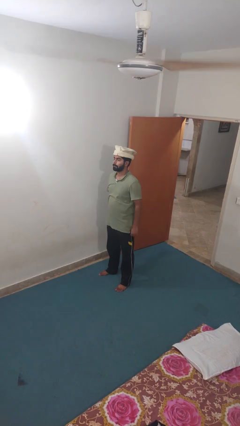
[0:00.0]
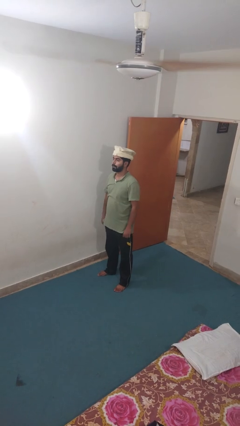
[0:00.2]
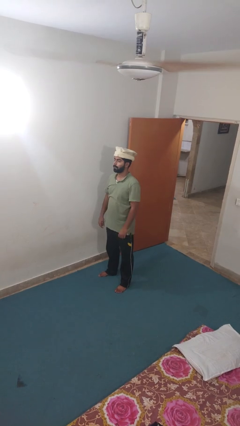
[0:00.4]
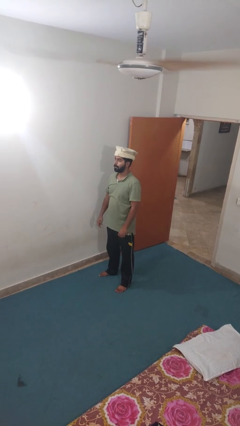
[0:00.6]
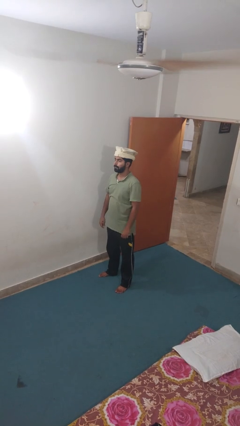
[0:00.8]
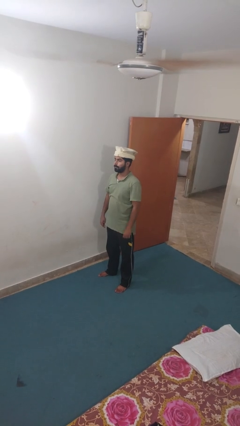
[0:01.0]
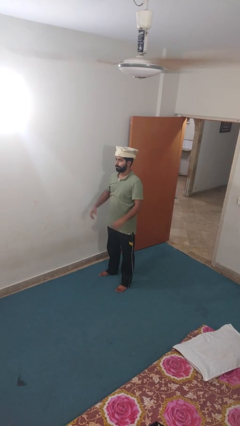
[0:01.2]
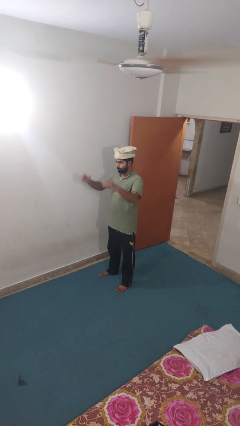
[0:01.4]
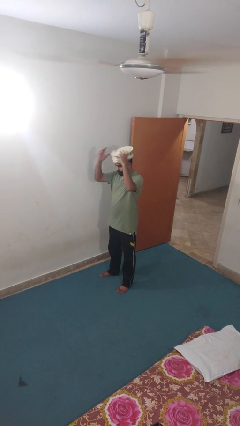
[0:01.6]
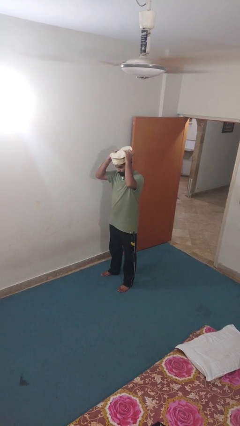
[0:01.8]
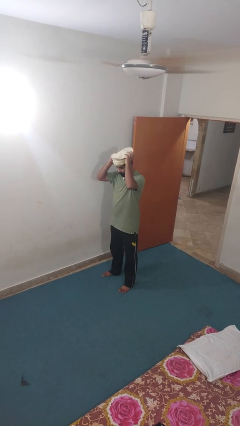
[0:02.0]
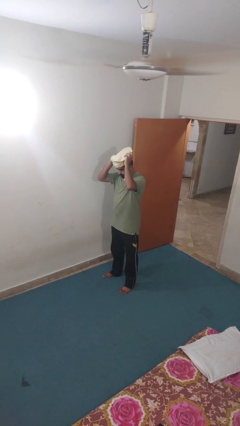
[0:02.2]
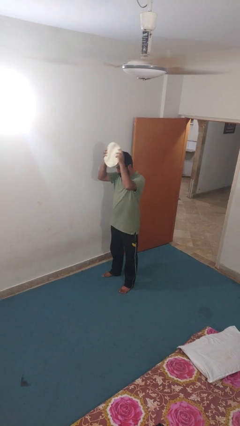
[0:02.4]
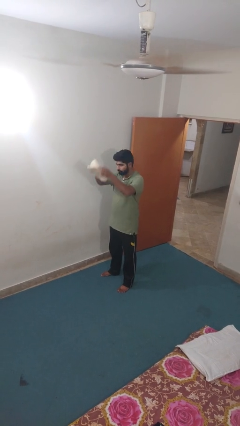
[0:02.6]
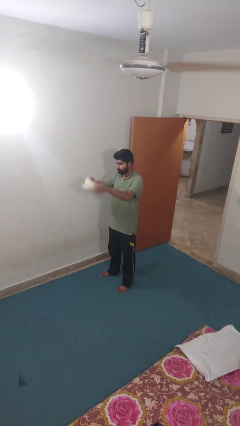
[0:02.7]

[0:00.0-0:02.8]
person takes off hat

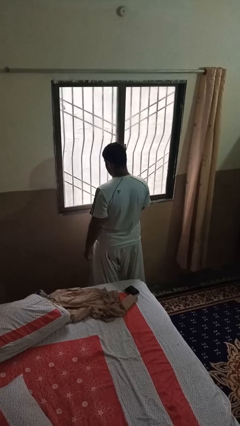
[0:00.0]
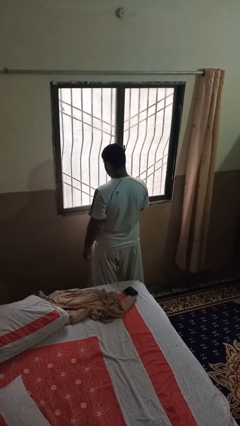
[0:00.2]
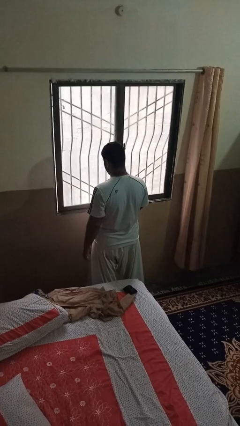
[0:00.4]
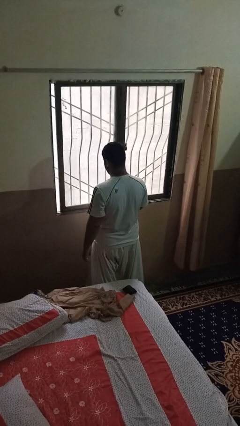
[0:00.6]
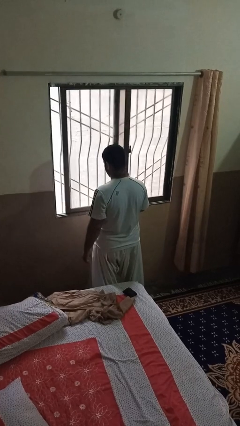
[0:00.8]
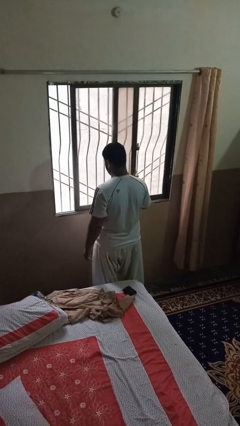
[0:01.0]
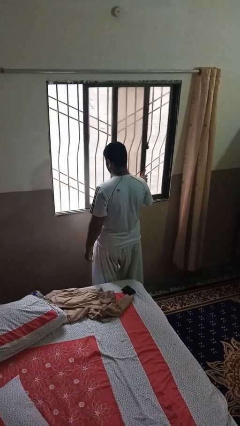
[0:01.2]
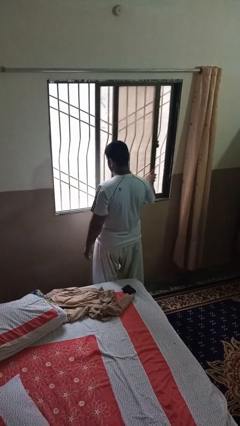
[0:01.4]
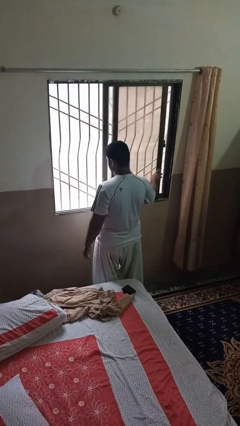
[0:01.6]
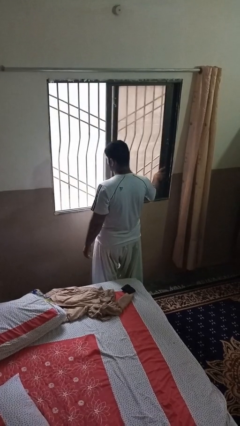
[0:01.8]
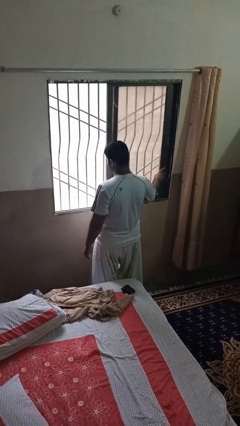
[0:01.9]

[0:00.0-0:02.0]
person opens home window

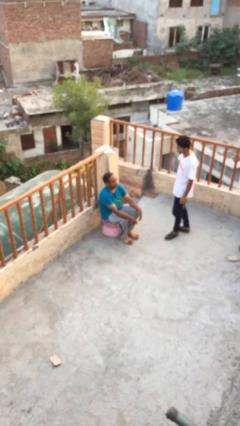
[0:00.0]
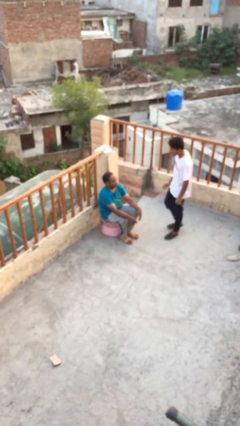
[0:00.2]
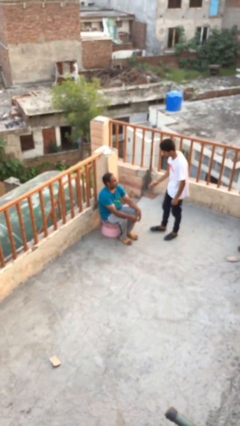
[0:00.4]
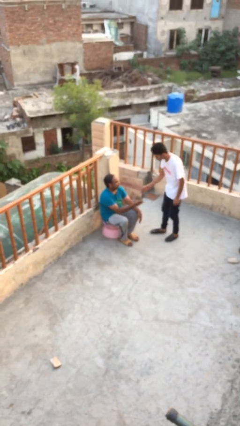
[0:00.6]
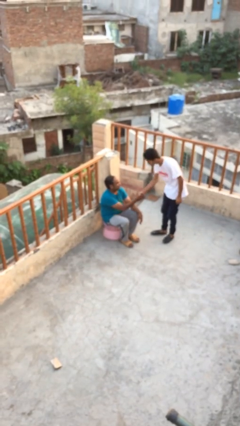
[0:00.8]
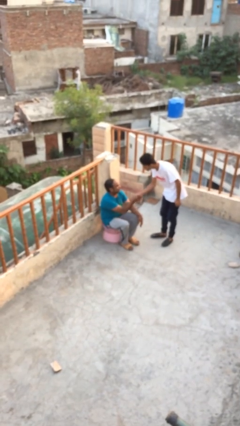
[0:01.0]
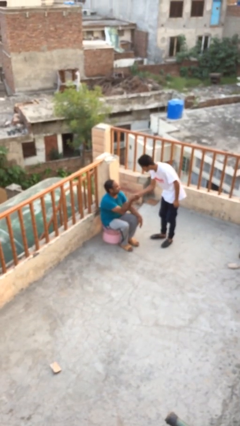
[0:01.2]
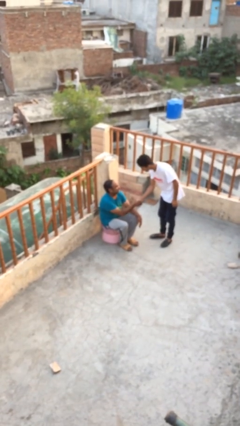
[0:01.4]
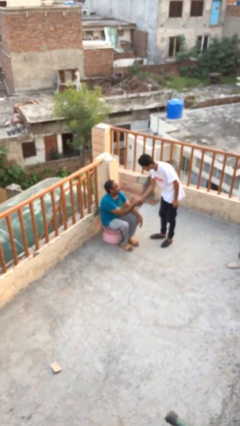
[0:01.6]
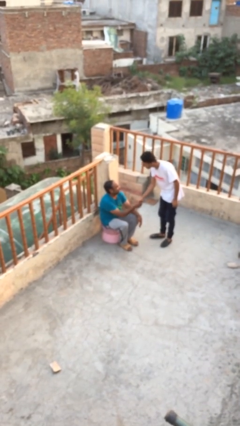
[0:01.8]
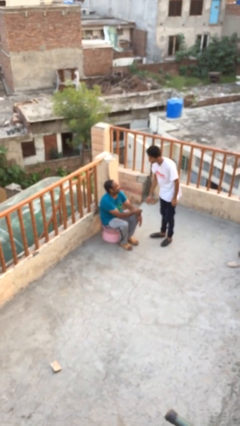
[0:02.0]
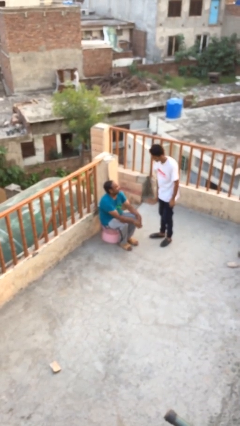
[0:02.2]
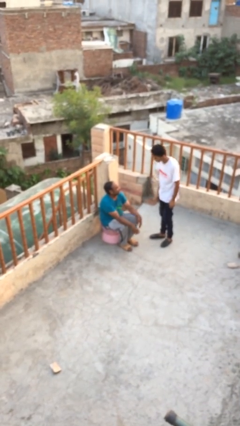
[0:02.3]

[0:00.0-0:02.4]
person shakes hand

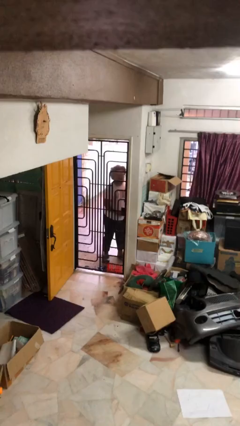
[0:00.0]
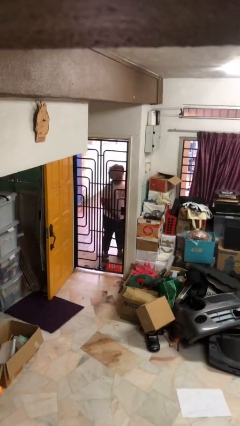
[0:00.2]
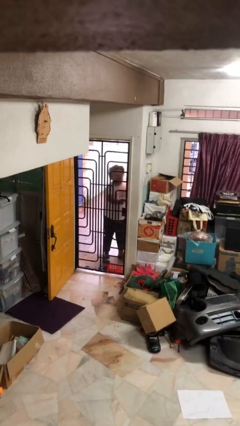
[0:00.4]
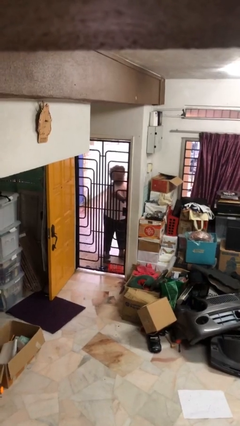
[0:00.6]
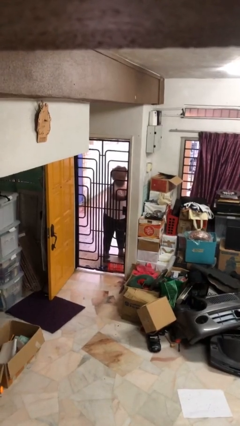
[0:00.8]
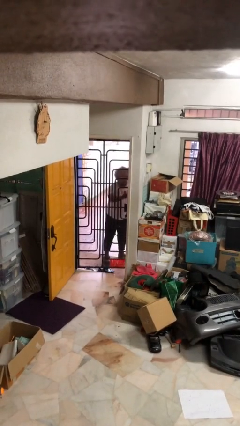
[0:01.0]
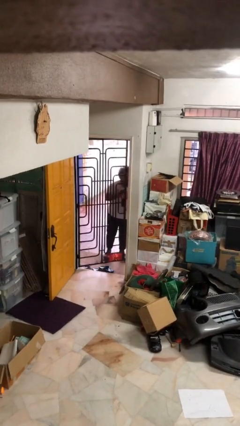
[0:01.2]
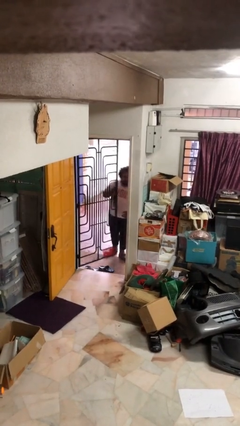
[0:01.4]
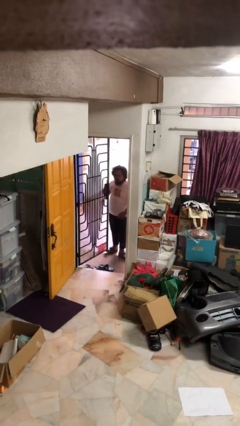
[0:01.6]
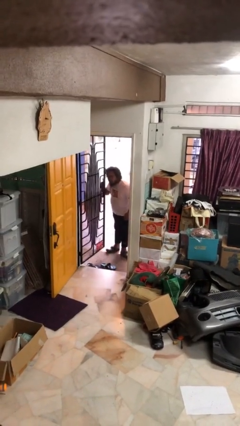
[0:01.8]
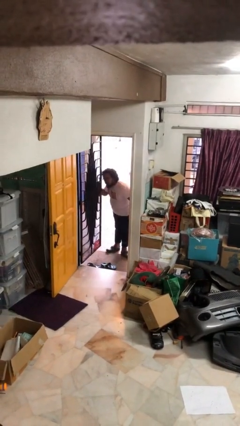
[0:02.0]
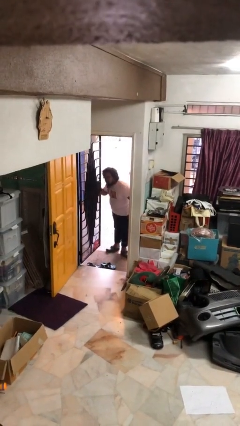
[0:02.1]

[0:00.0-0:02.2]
person opens facility door

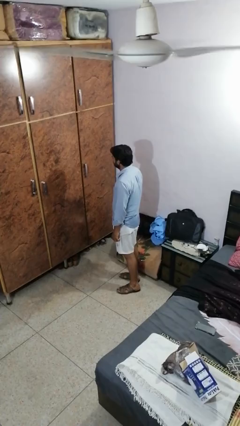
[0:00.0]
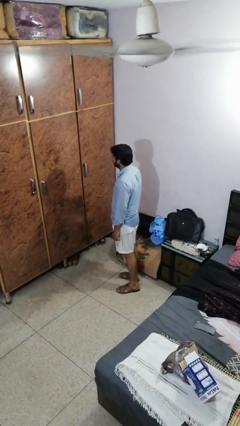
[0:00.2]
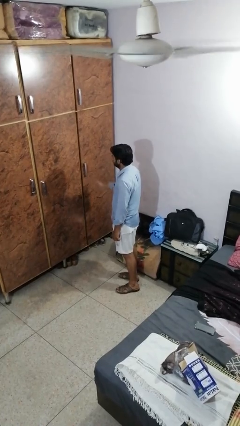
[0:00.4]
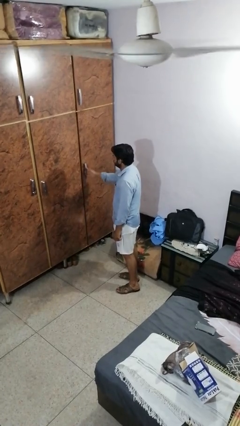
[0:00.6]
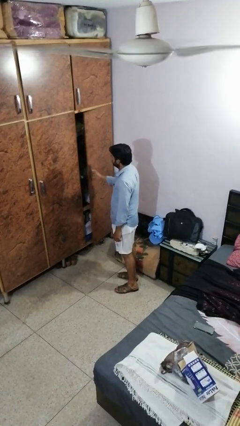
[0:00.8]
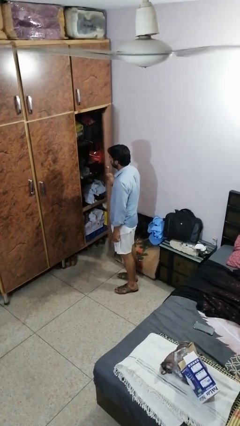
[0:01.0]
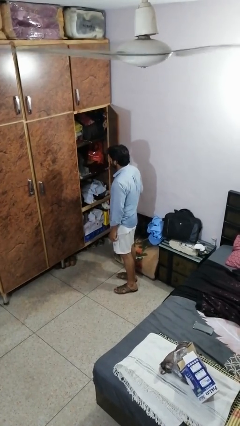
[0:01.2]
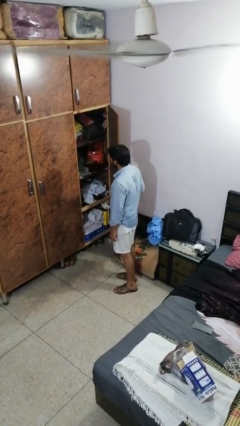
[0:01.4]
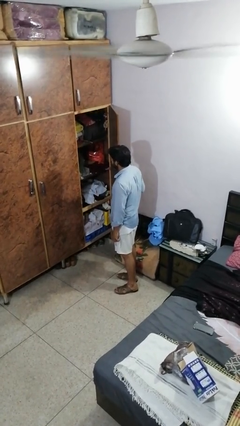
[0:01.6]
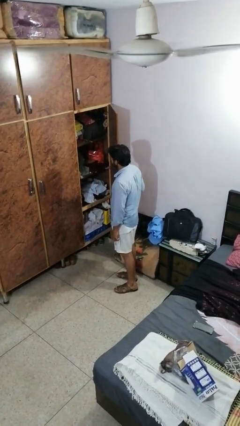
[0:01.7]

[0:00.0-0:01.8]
person opens closet door

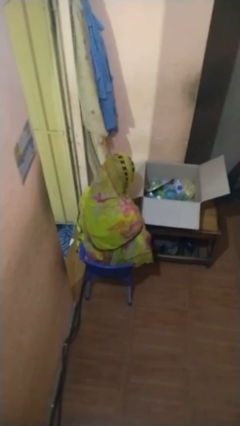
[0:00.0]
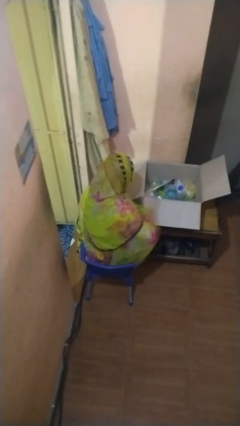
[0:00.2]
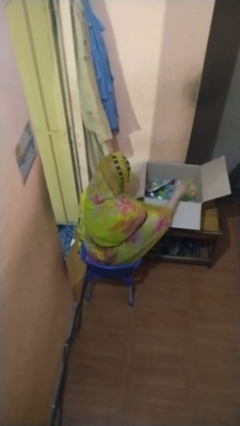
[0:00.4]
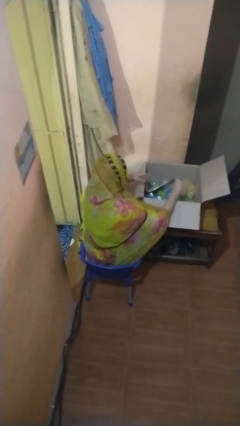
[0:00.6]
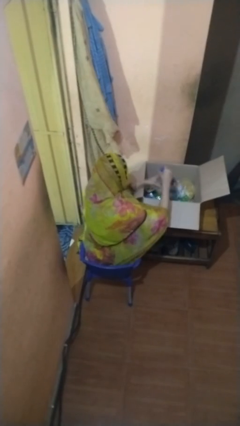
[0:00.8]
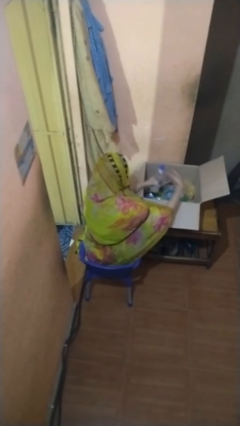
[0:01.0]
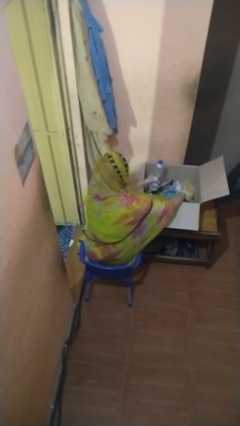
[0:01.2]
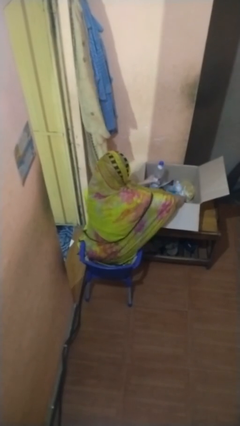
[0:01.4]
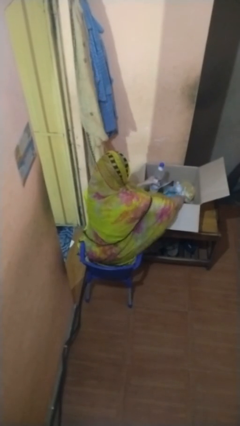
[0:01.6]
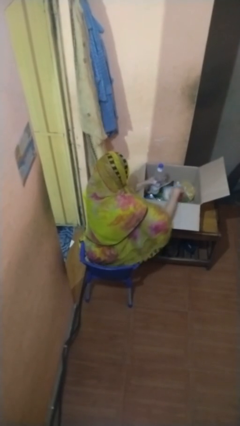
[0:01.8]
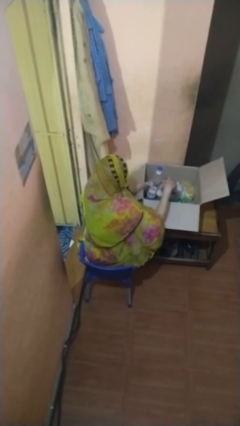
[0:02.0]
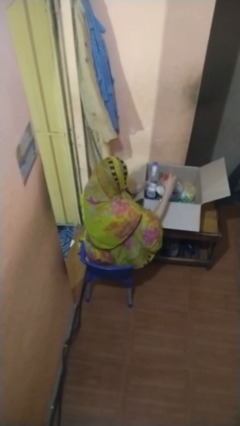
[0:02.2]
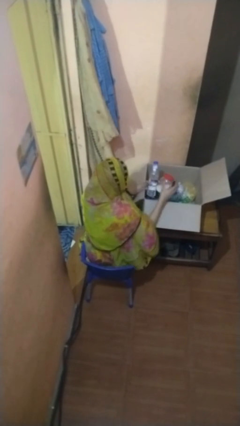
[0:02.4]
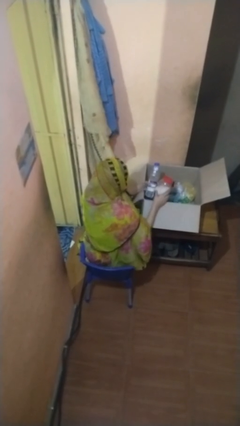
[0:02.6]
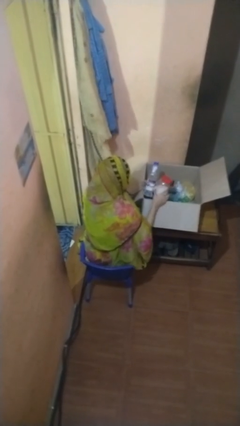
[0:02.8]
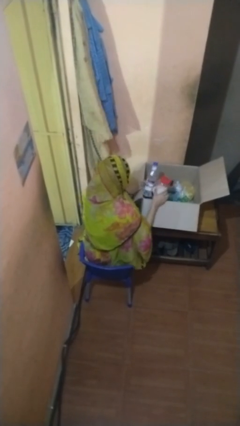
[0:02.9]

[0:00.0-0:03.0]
person takes object from box

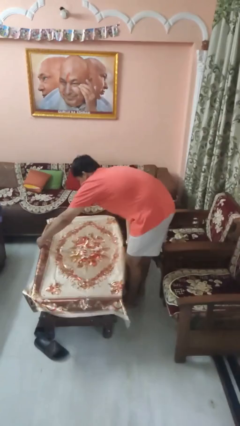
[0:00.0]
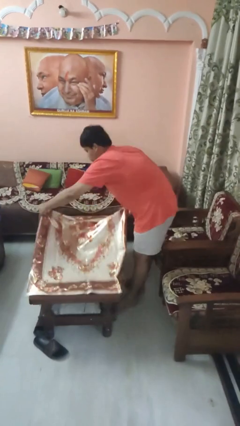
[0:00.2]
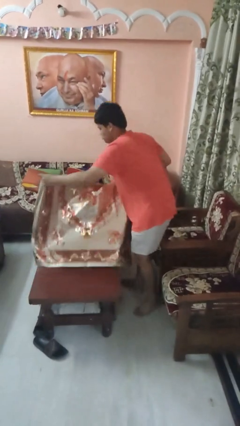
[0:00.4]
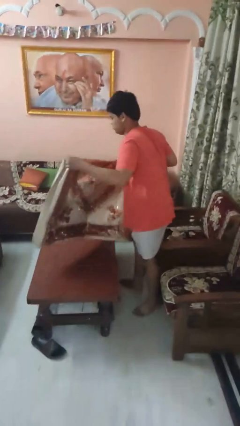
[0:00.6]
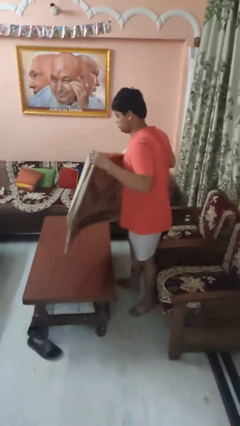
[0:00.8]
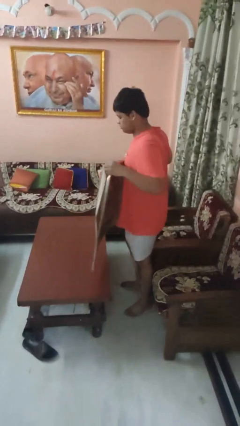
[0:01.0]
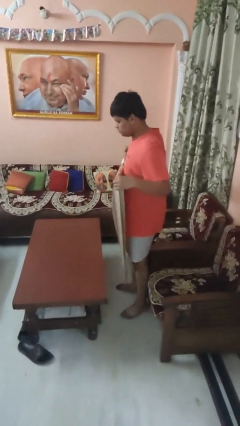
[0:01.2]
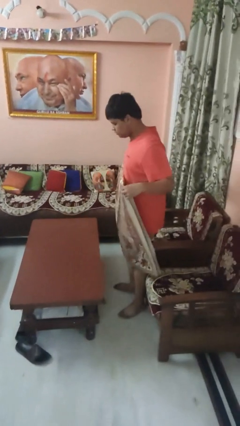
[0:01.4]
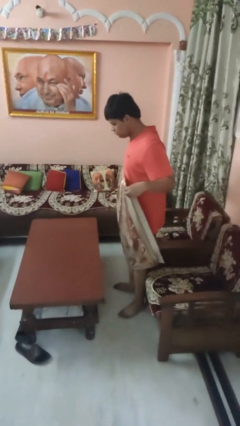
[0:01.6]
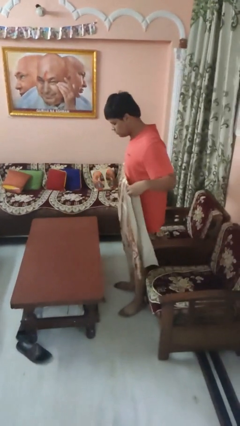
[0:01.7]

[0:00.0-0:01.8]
person folds tablecloth

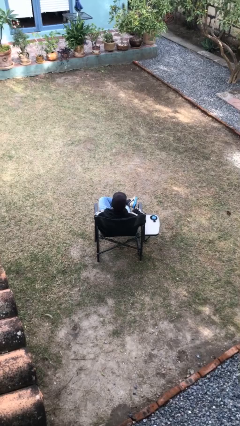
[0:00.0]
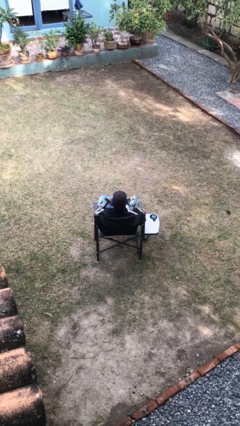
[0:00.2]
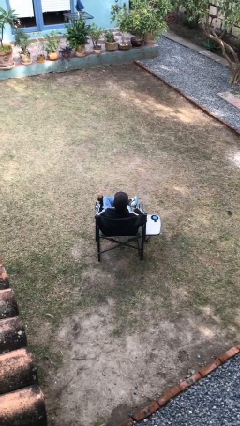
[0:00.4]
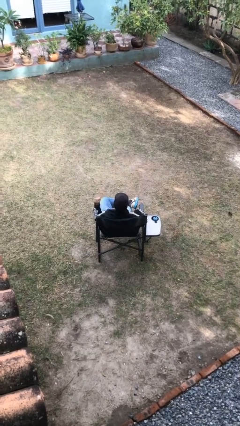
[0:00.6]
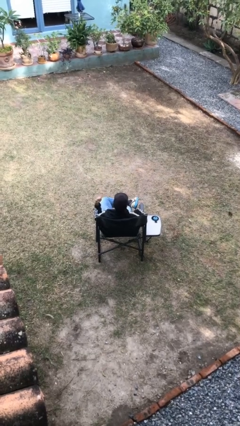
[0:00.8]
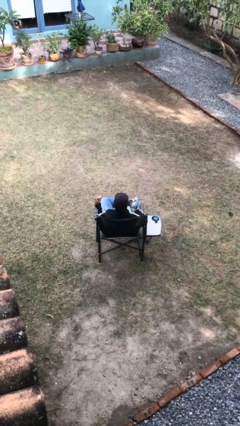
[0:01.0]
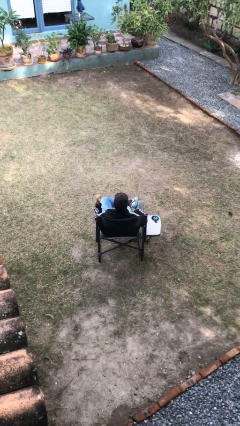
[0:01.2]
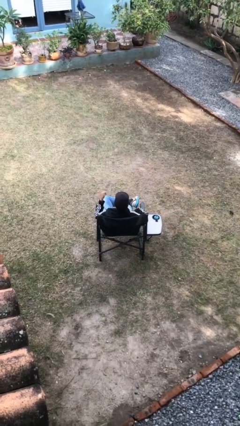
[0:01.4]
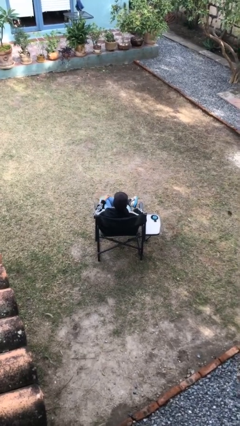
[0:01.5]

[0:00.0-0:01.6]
person gestures hang loose
